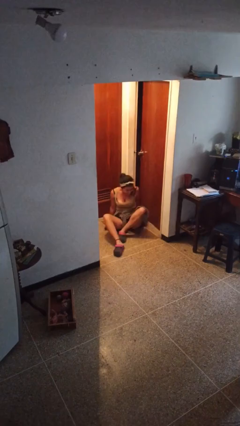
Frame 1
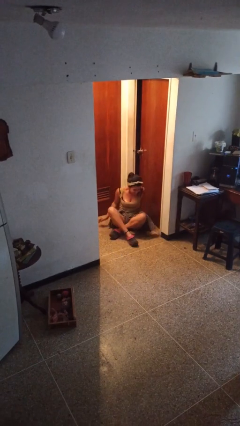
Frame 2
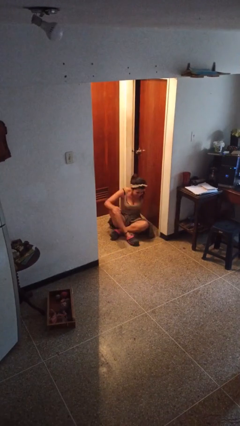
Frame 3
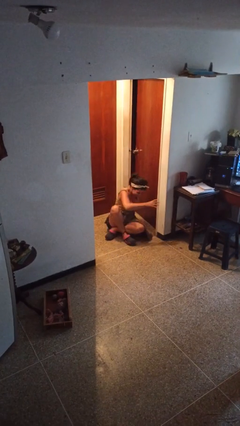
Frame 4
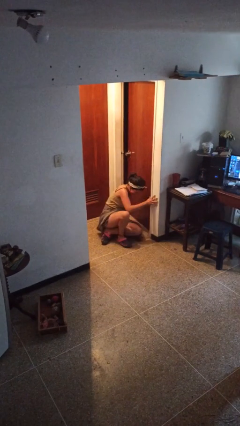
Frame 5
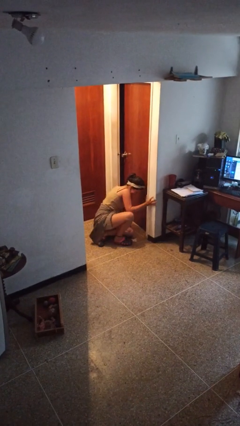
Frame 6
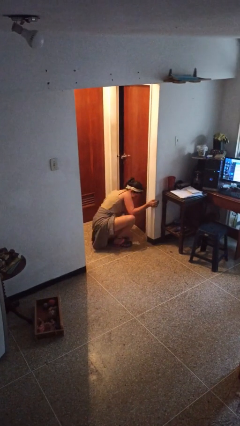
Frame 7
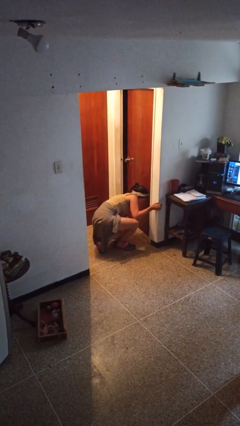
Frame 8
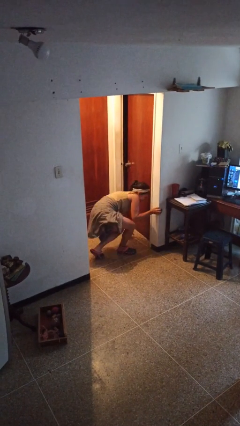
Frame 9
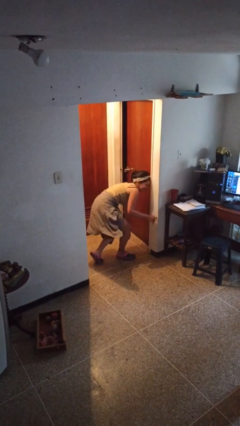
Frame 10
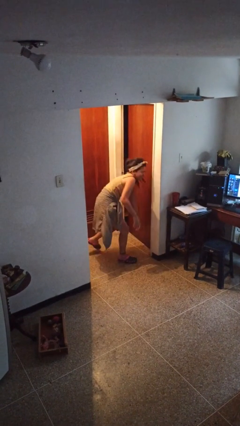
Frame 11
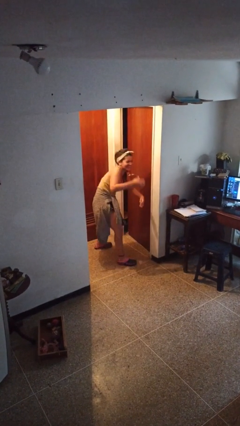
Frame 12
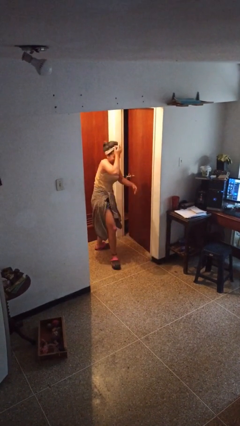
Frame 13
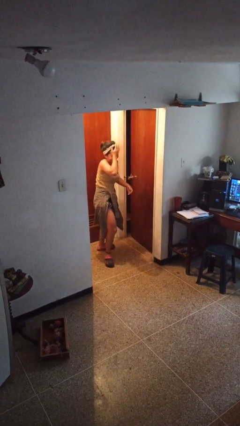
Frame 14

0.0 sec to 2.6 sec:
person stands up

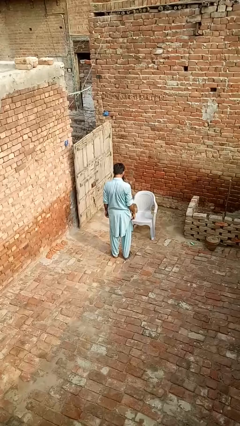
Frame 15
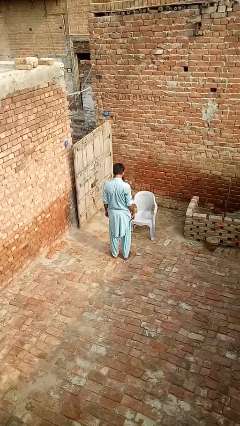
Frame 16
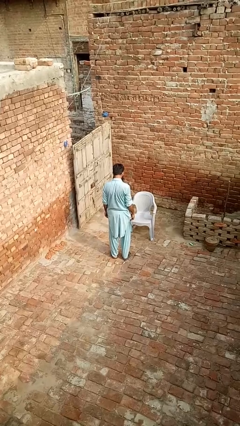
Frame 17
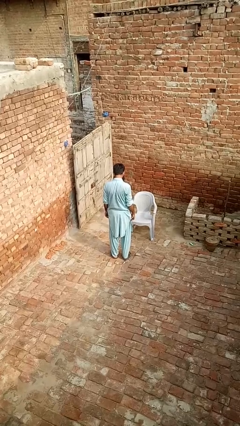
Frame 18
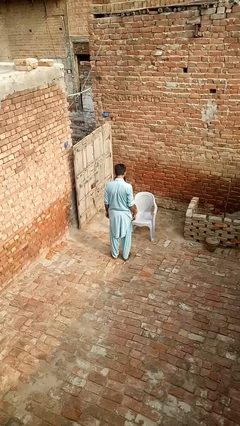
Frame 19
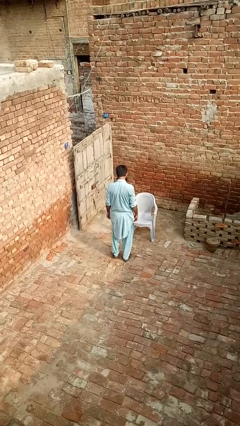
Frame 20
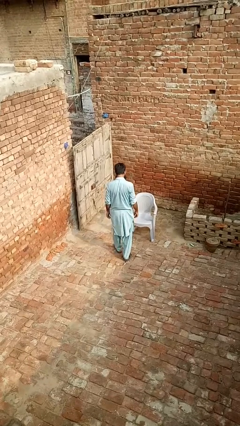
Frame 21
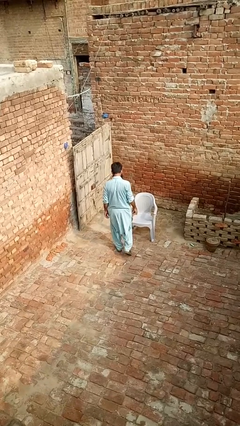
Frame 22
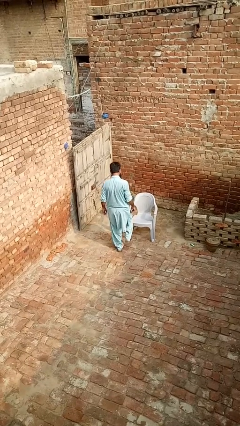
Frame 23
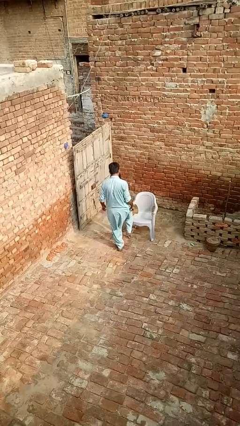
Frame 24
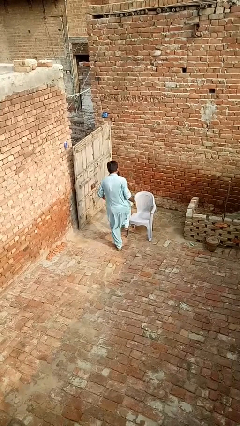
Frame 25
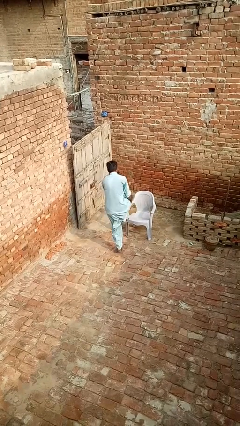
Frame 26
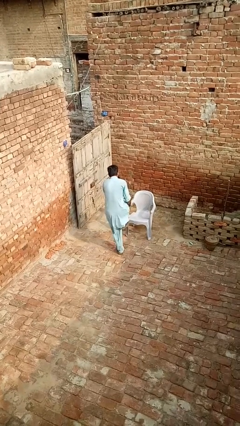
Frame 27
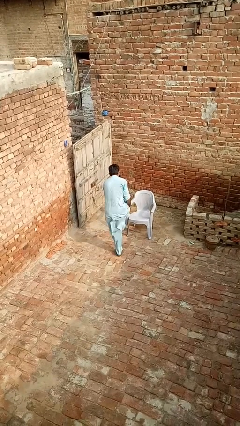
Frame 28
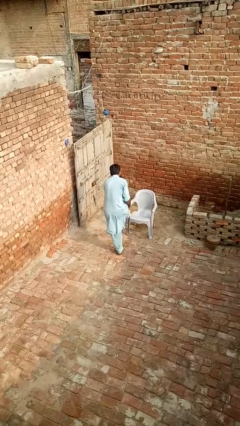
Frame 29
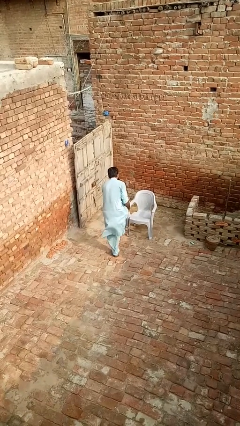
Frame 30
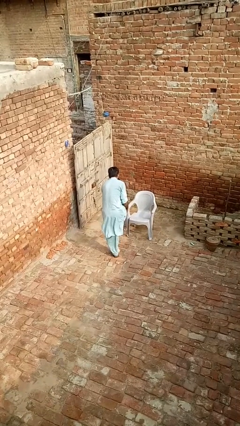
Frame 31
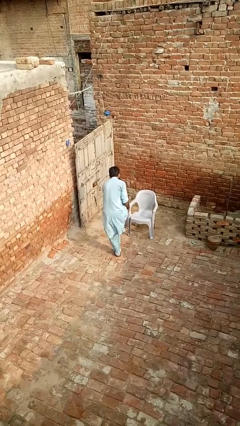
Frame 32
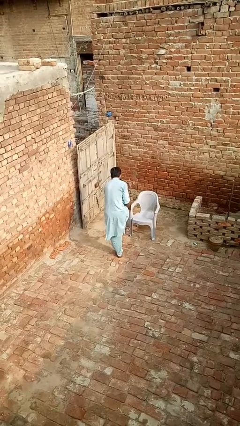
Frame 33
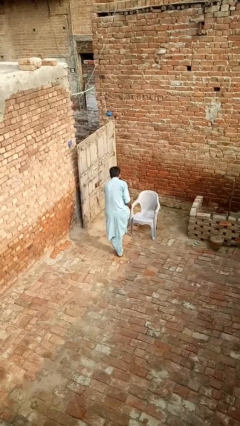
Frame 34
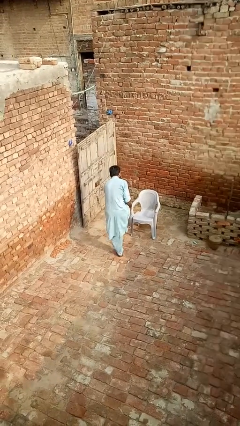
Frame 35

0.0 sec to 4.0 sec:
person stubs toe

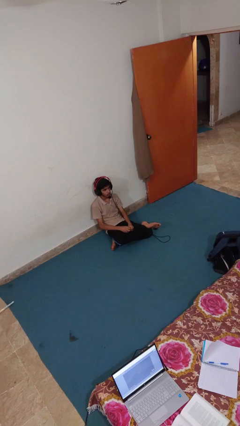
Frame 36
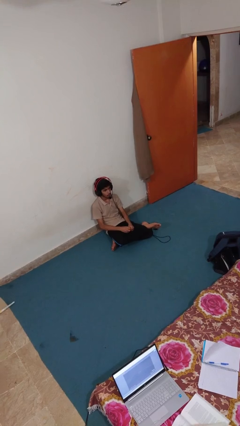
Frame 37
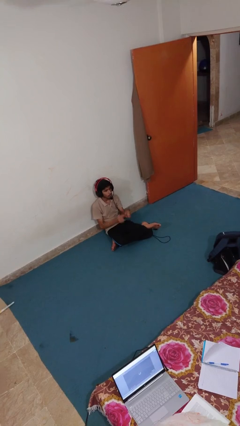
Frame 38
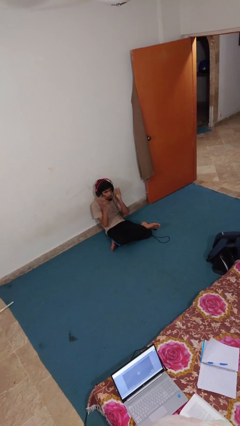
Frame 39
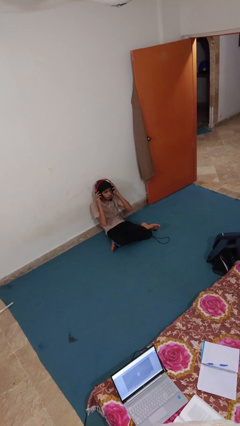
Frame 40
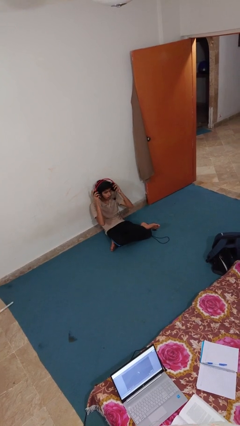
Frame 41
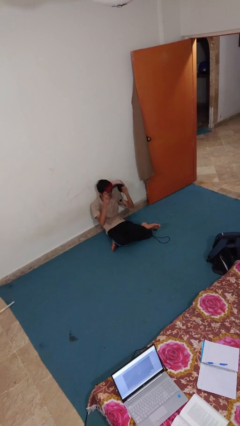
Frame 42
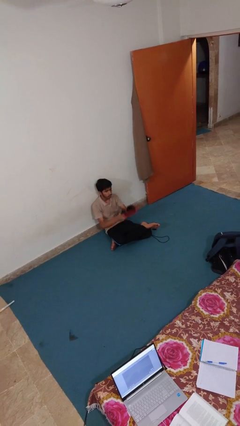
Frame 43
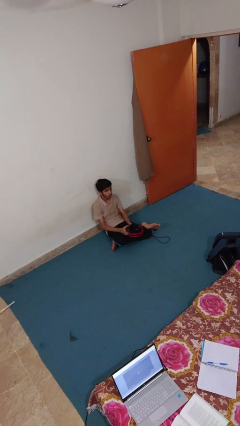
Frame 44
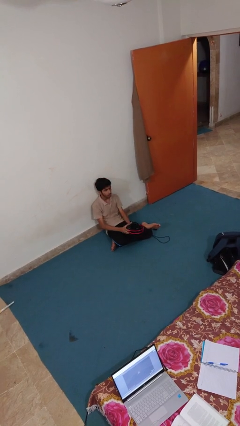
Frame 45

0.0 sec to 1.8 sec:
person takes off headphones

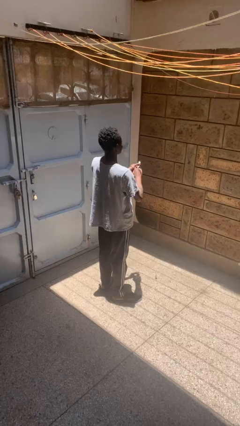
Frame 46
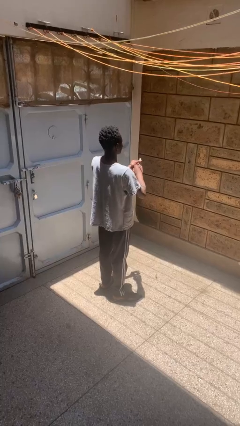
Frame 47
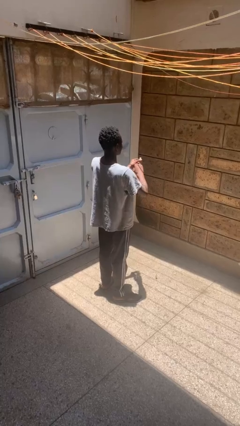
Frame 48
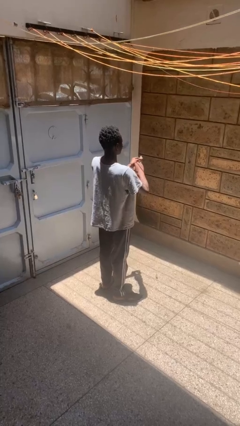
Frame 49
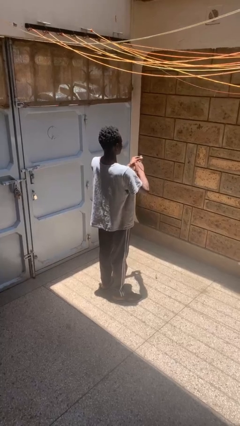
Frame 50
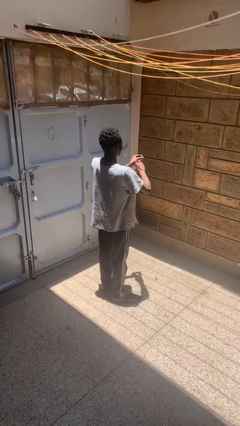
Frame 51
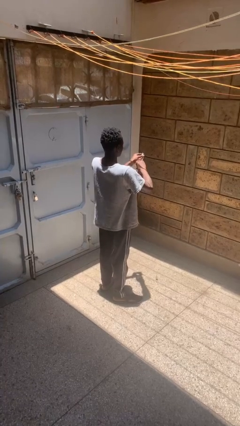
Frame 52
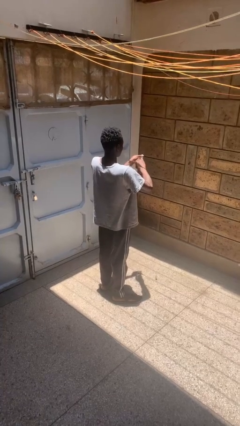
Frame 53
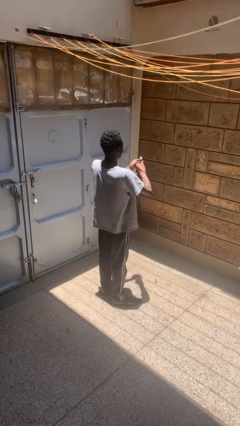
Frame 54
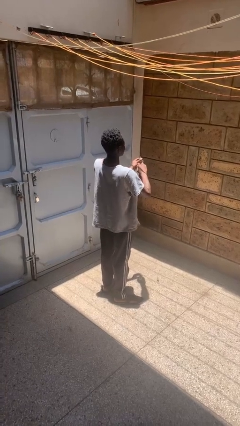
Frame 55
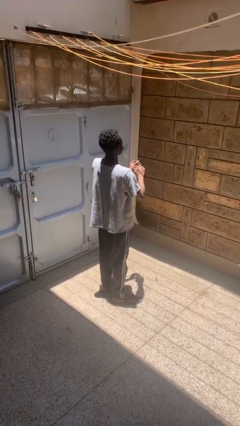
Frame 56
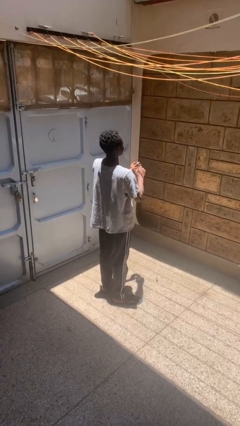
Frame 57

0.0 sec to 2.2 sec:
person clips fingernails

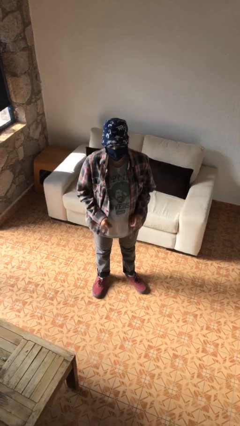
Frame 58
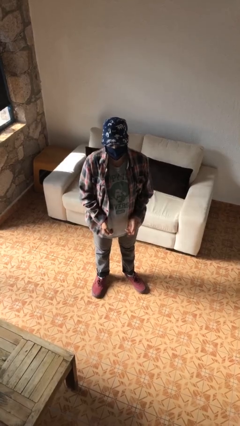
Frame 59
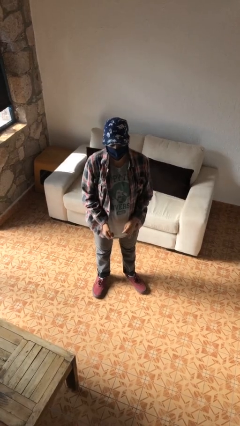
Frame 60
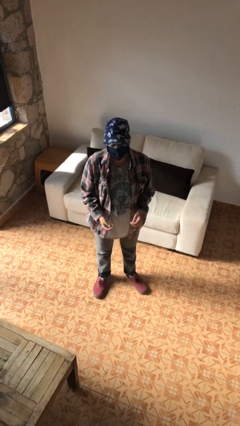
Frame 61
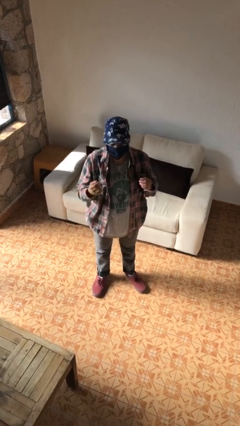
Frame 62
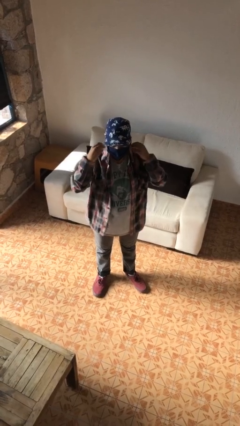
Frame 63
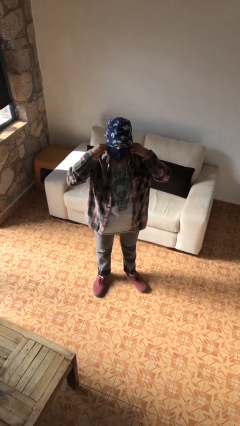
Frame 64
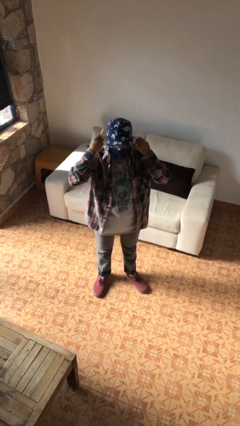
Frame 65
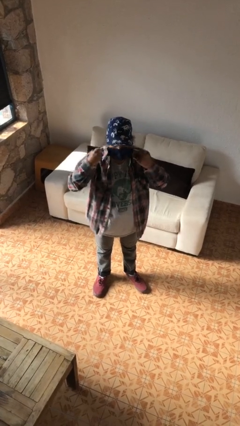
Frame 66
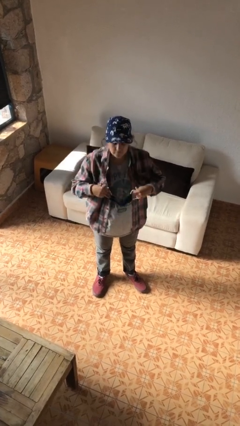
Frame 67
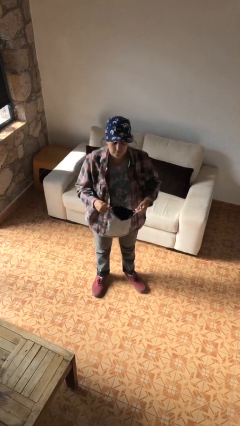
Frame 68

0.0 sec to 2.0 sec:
person takes off facemask

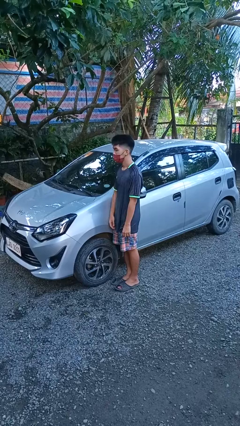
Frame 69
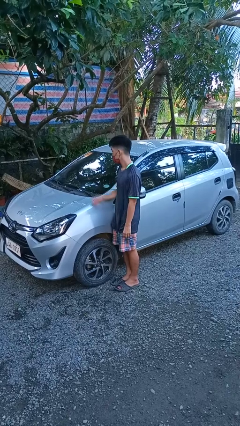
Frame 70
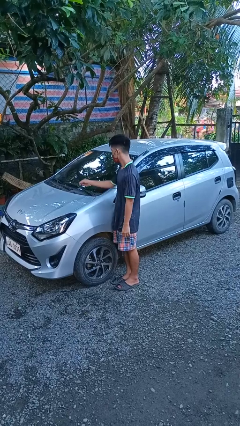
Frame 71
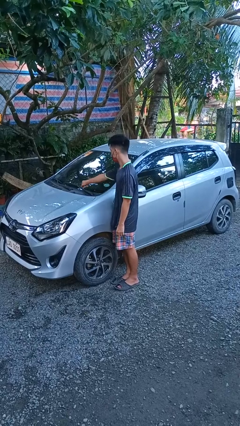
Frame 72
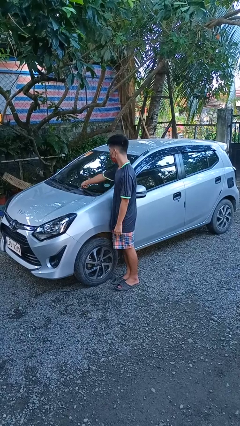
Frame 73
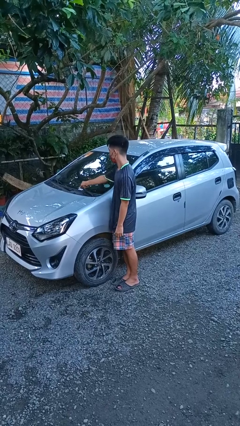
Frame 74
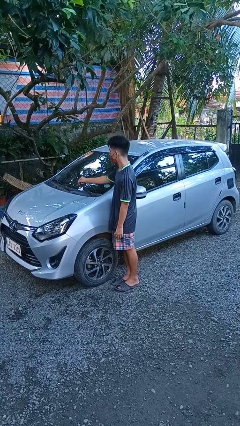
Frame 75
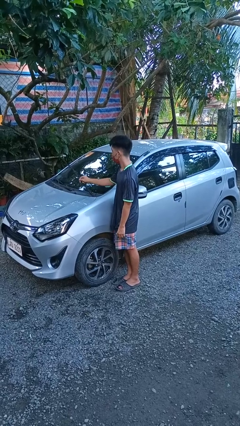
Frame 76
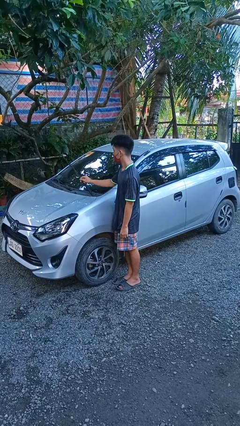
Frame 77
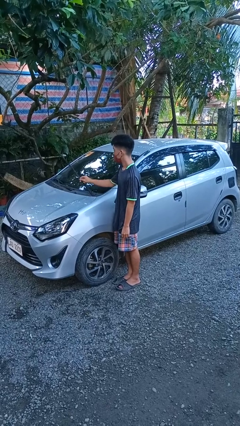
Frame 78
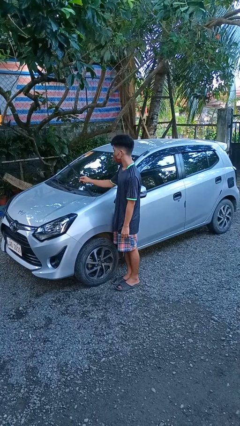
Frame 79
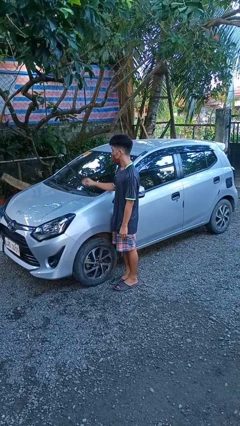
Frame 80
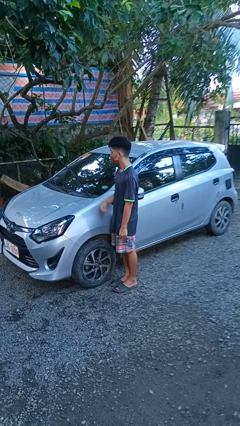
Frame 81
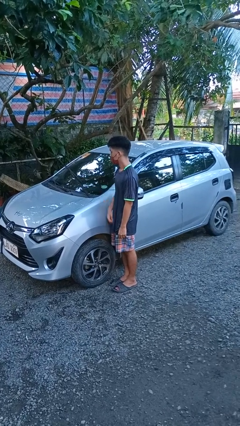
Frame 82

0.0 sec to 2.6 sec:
person flips up car wipers

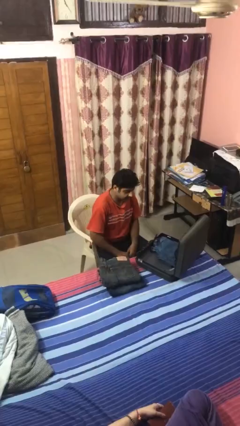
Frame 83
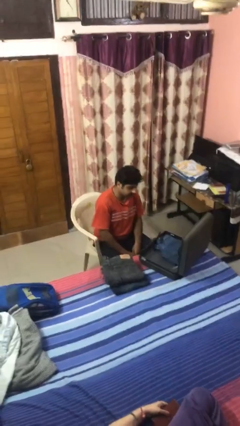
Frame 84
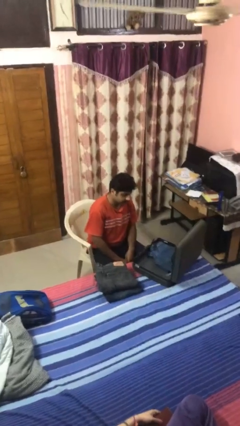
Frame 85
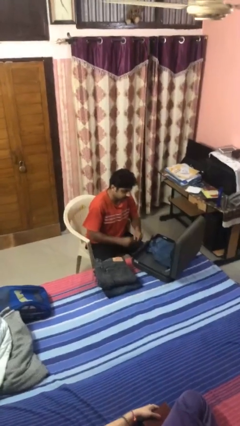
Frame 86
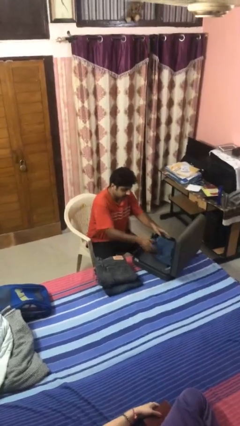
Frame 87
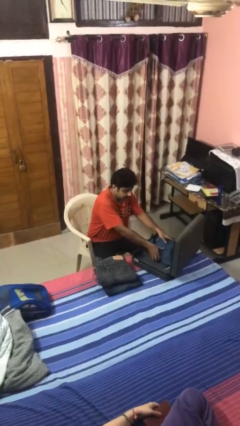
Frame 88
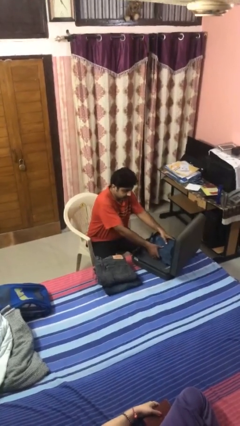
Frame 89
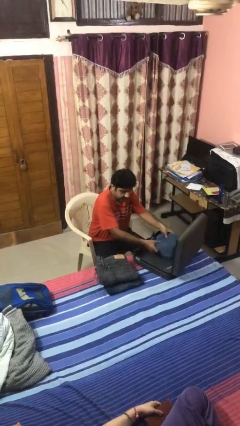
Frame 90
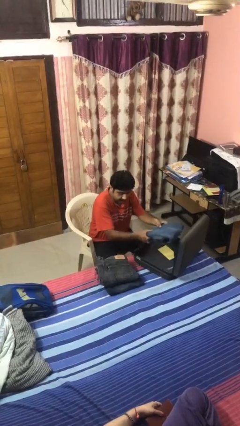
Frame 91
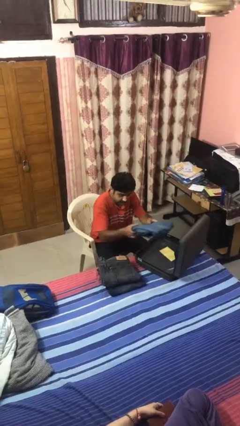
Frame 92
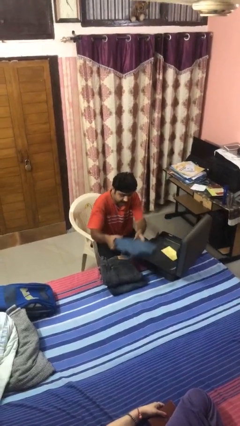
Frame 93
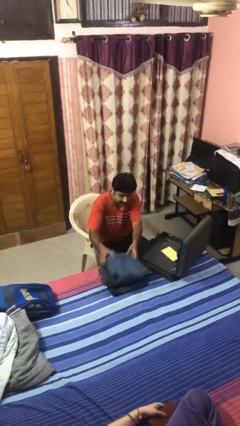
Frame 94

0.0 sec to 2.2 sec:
person unloads clothes from suitcase
